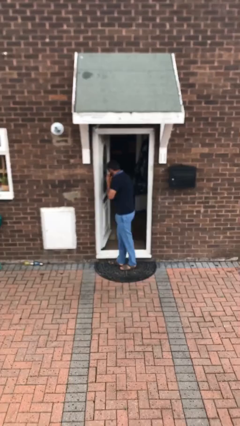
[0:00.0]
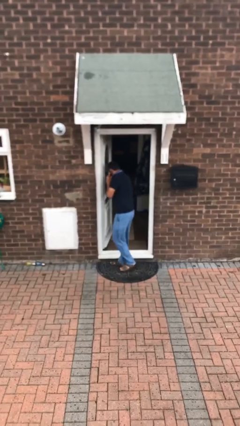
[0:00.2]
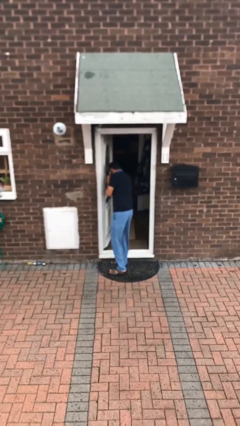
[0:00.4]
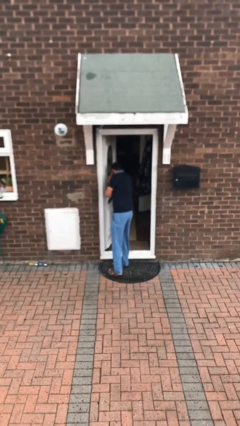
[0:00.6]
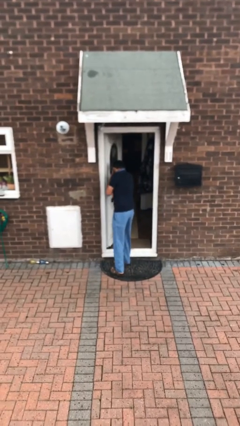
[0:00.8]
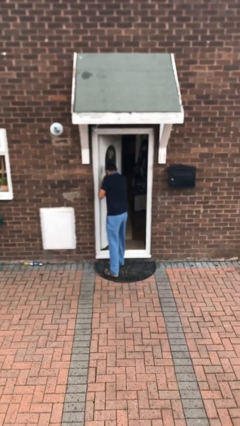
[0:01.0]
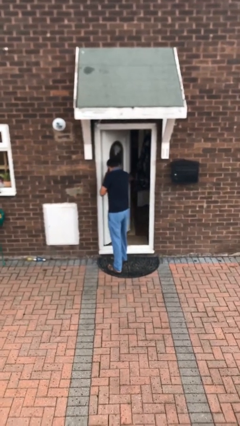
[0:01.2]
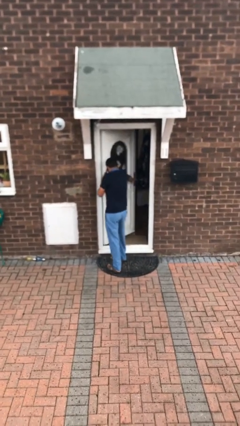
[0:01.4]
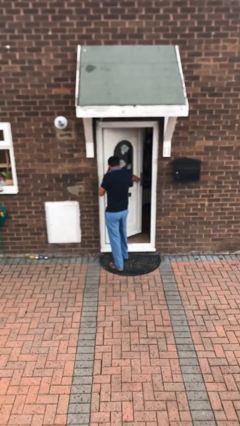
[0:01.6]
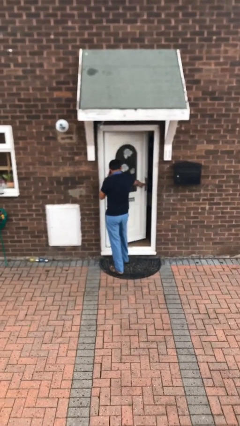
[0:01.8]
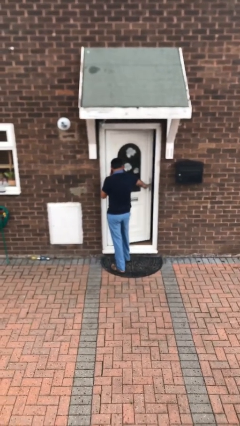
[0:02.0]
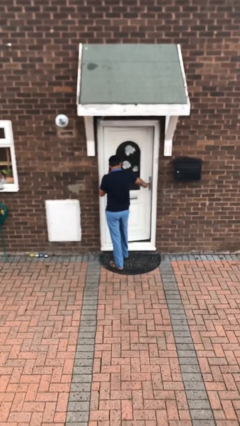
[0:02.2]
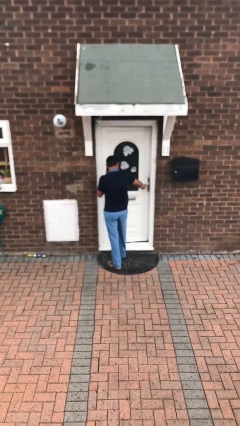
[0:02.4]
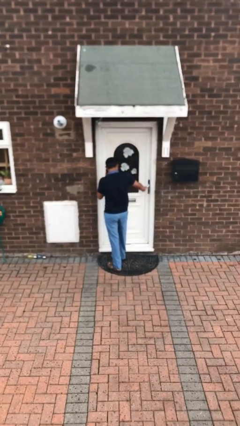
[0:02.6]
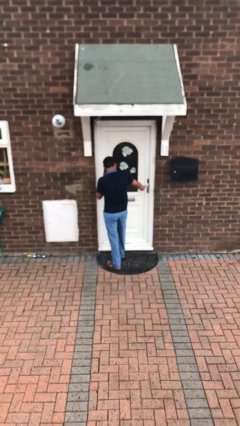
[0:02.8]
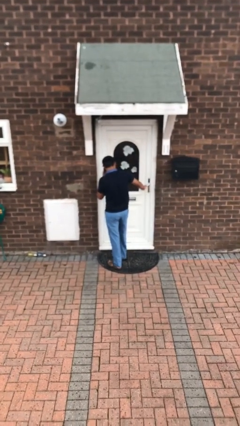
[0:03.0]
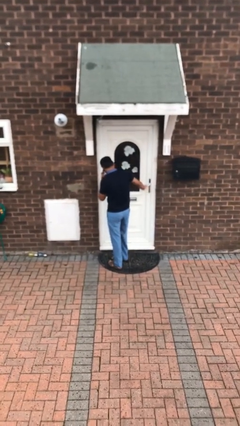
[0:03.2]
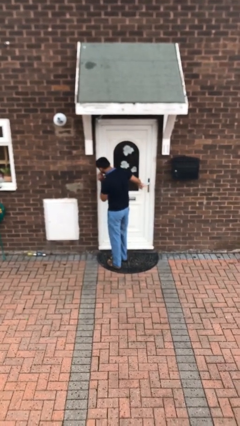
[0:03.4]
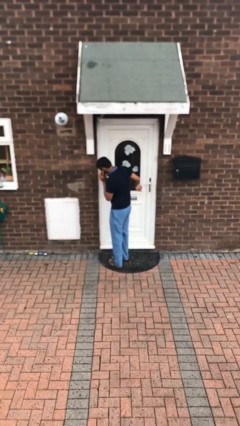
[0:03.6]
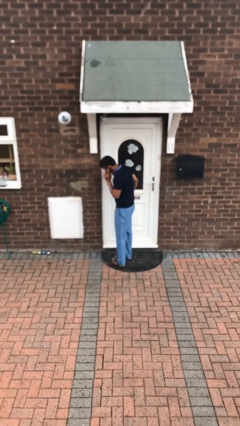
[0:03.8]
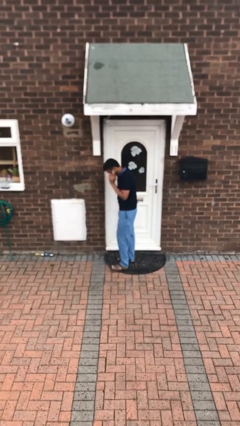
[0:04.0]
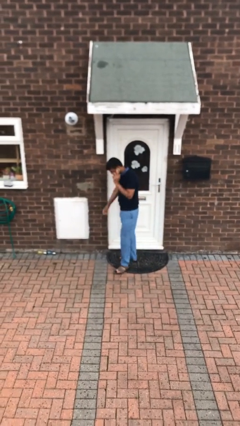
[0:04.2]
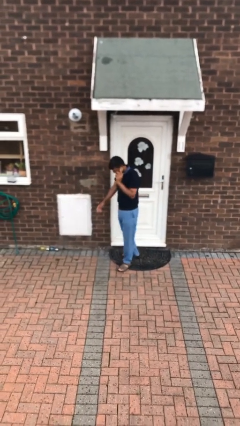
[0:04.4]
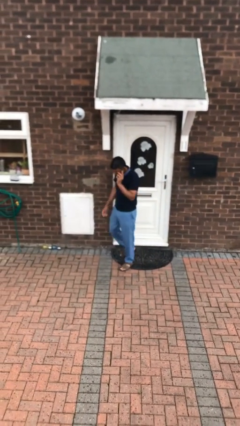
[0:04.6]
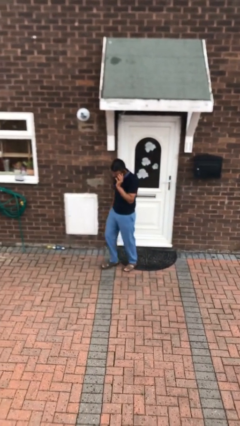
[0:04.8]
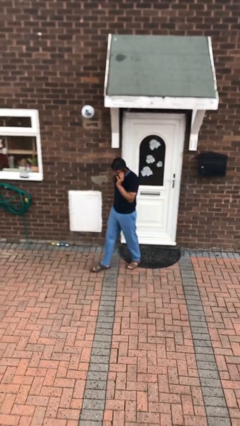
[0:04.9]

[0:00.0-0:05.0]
person closes facility door

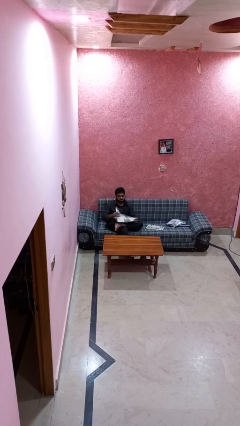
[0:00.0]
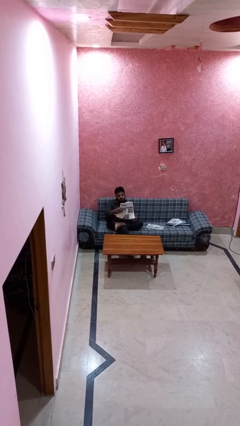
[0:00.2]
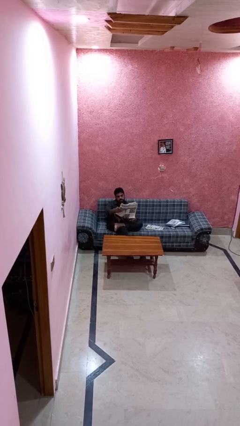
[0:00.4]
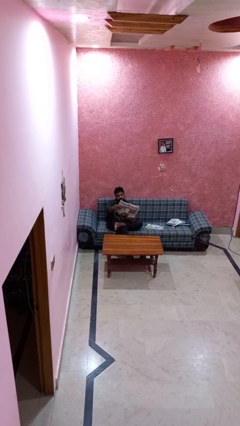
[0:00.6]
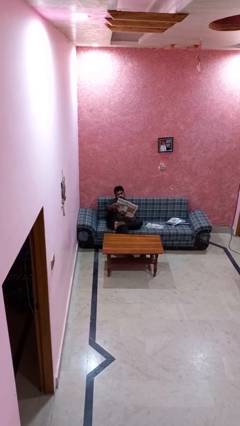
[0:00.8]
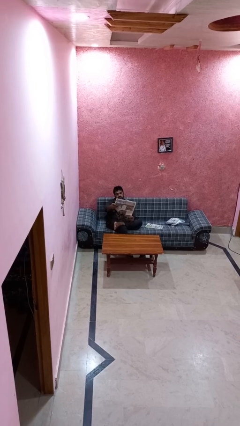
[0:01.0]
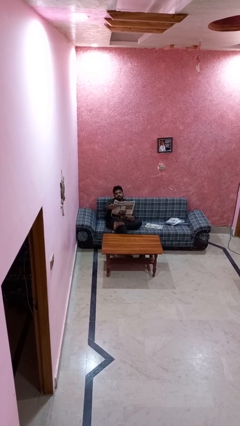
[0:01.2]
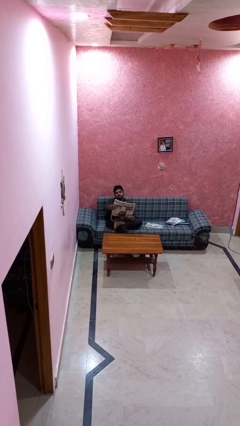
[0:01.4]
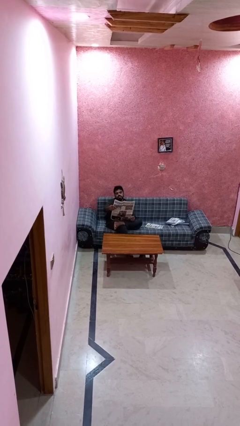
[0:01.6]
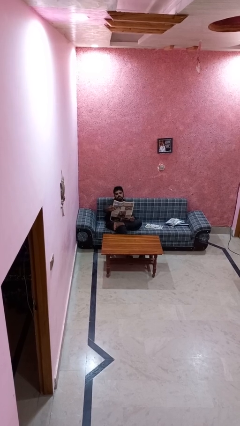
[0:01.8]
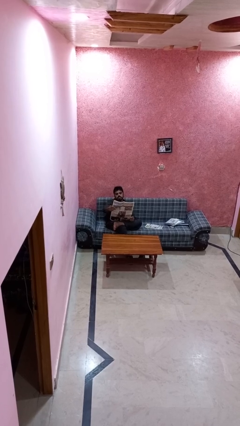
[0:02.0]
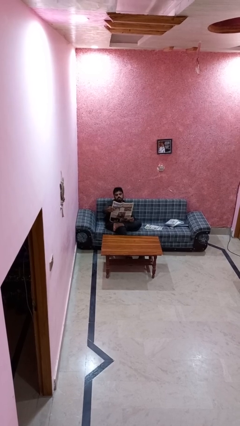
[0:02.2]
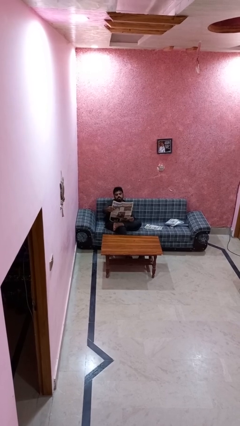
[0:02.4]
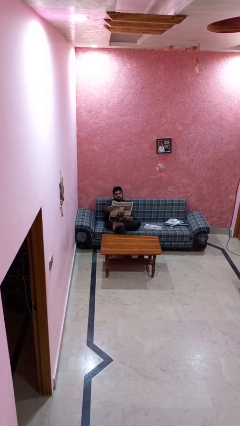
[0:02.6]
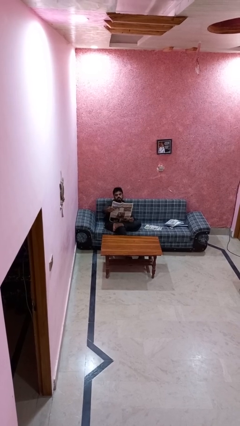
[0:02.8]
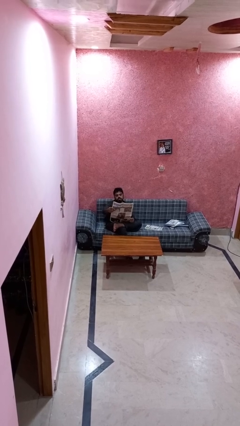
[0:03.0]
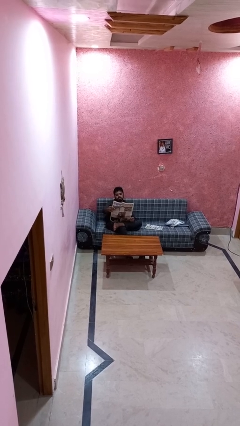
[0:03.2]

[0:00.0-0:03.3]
person reads newspaper

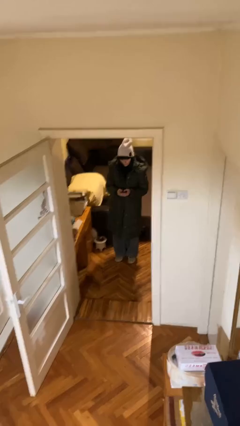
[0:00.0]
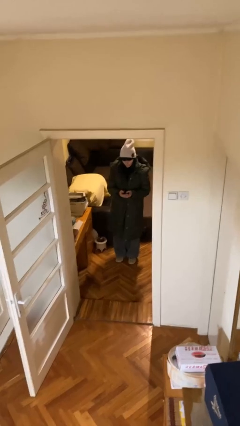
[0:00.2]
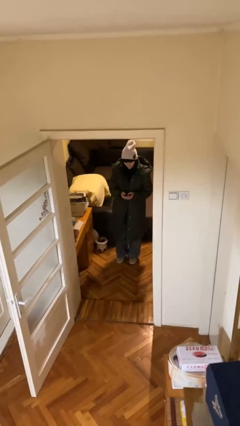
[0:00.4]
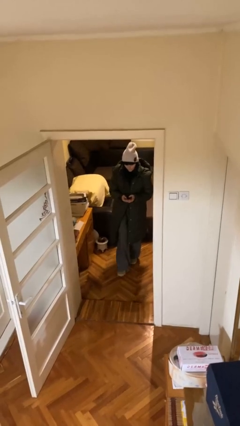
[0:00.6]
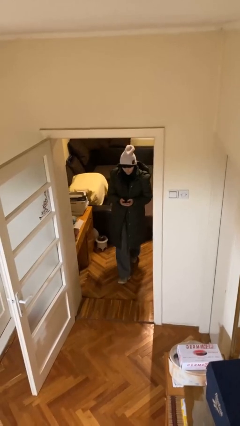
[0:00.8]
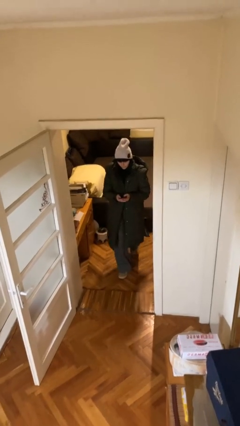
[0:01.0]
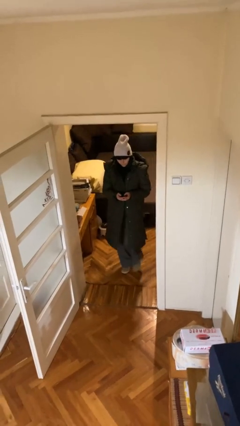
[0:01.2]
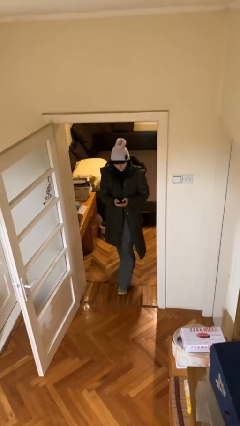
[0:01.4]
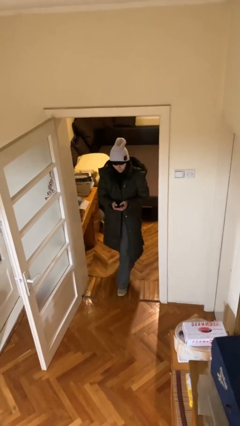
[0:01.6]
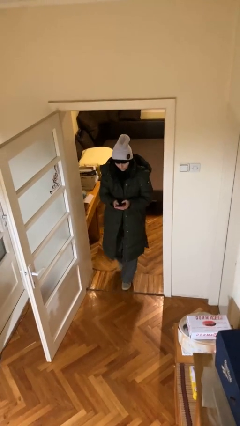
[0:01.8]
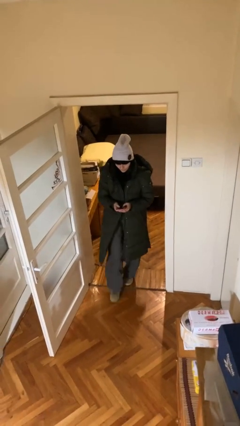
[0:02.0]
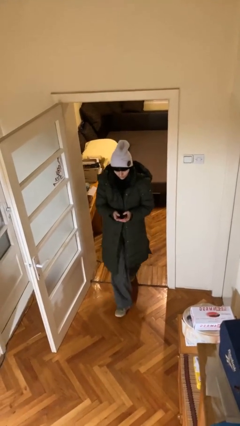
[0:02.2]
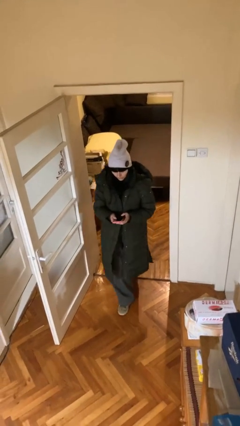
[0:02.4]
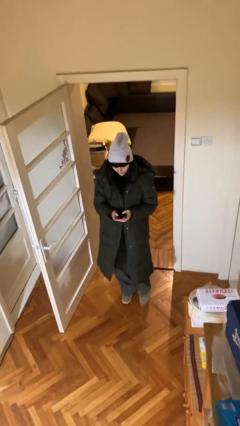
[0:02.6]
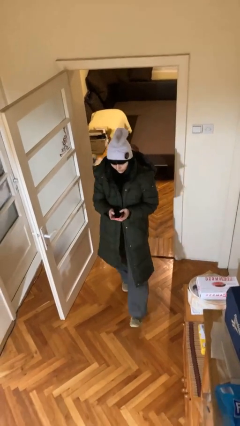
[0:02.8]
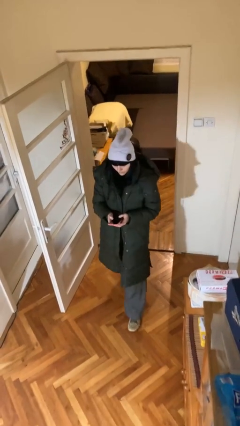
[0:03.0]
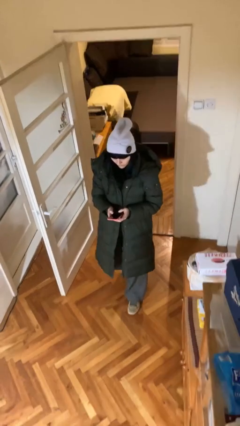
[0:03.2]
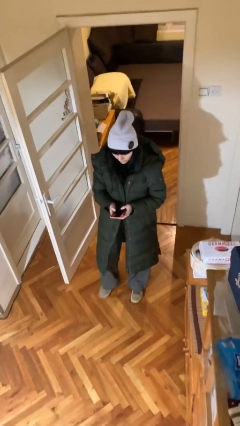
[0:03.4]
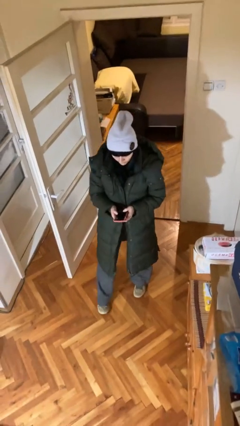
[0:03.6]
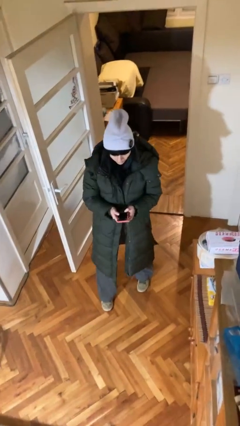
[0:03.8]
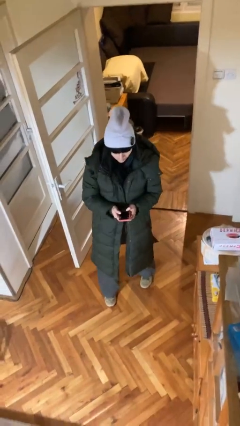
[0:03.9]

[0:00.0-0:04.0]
person enters scene through structure

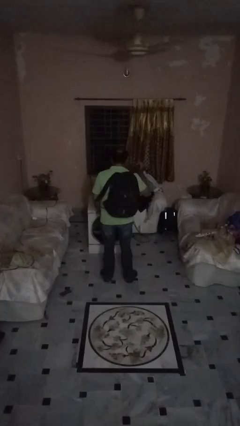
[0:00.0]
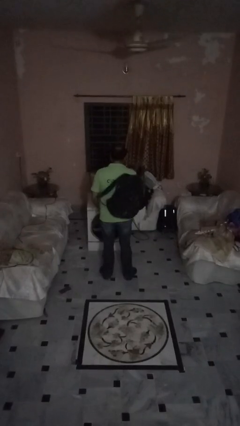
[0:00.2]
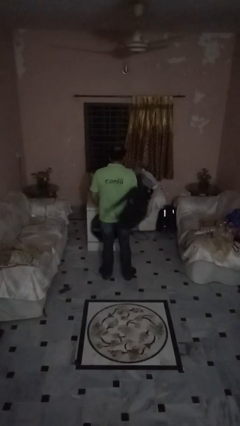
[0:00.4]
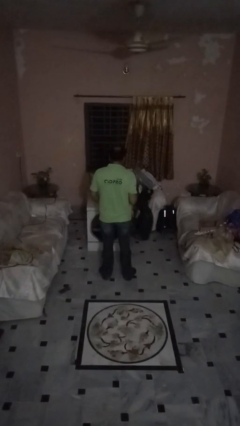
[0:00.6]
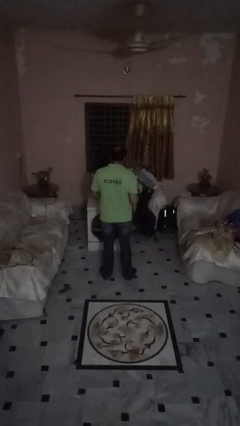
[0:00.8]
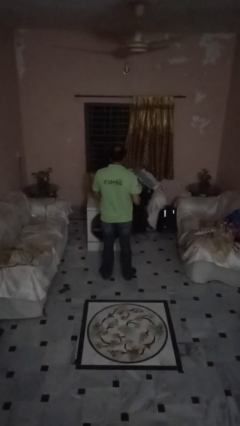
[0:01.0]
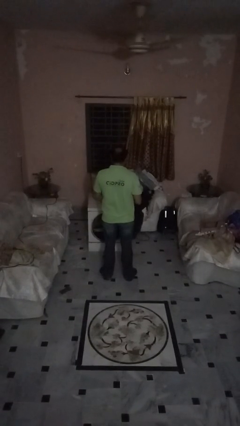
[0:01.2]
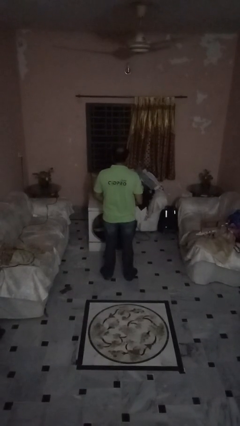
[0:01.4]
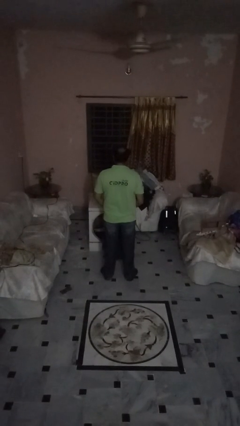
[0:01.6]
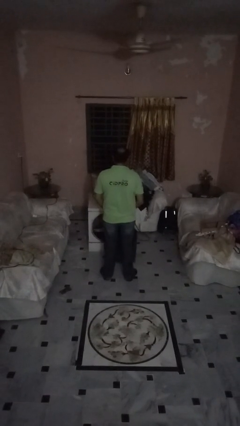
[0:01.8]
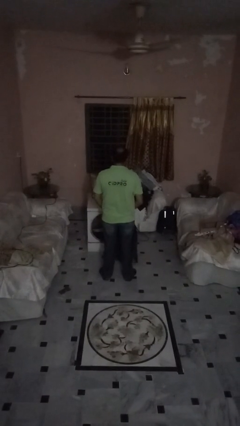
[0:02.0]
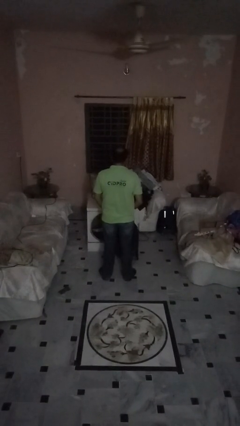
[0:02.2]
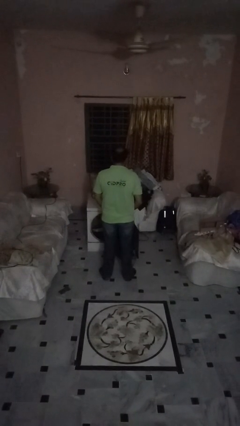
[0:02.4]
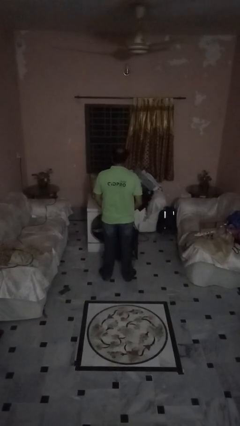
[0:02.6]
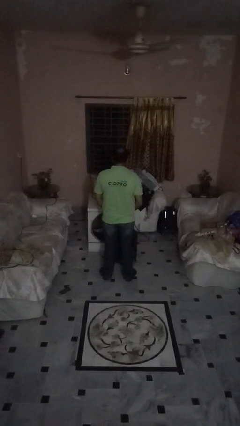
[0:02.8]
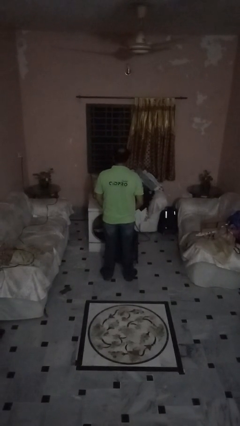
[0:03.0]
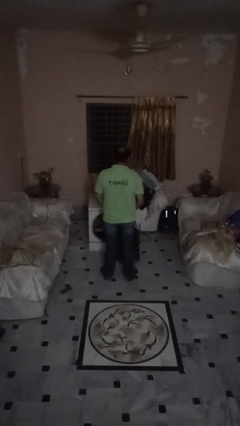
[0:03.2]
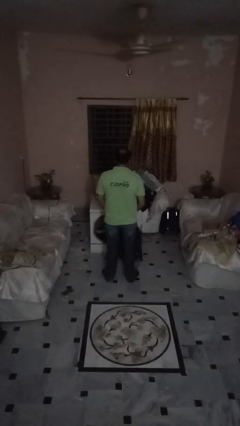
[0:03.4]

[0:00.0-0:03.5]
person takes off backpack

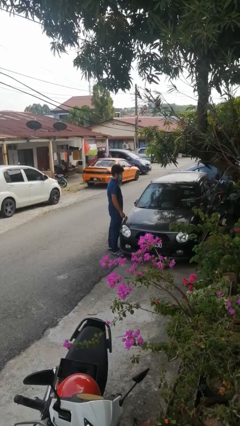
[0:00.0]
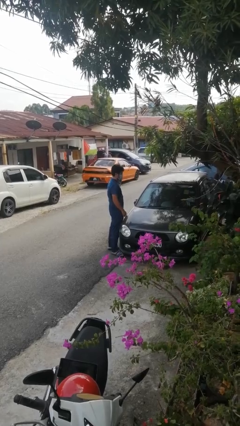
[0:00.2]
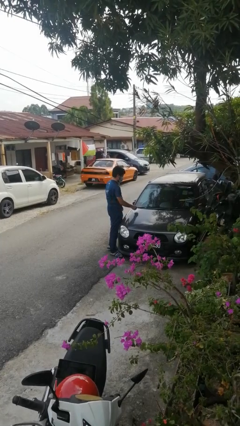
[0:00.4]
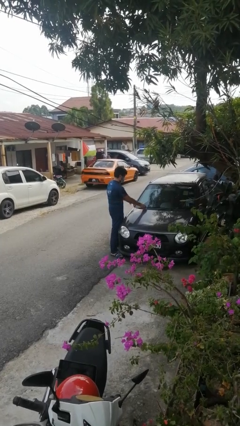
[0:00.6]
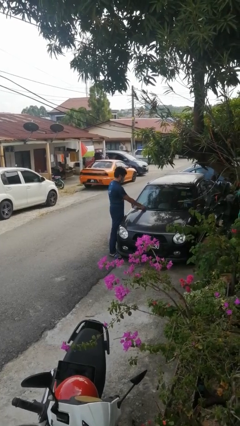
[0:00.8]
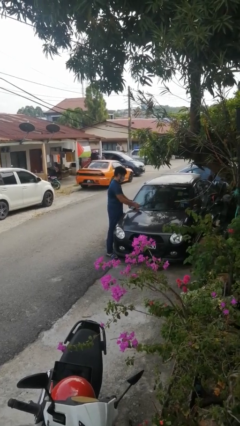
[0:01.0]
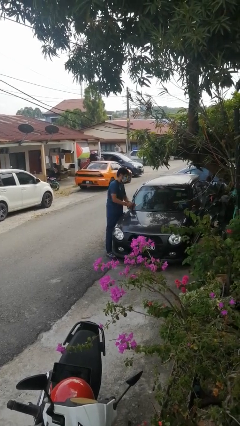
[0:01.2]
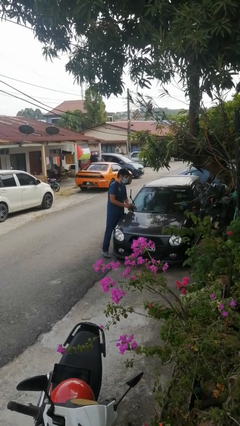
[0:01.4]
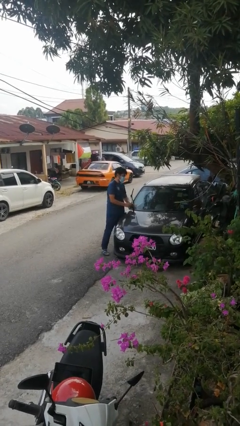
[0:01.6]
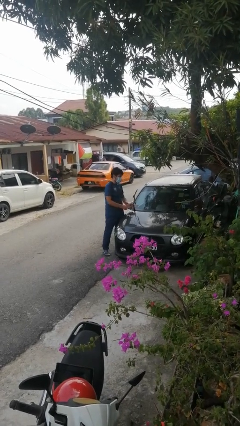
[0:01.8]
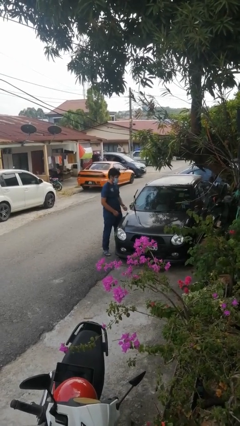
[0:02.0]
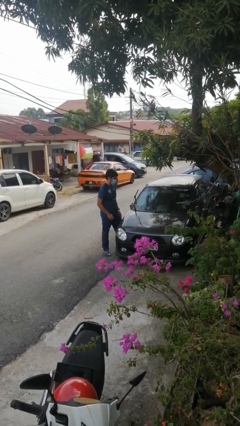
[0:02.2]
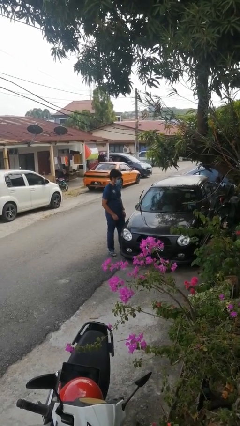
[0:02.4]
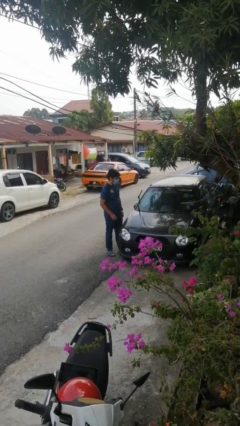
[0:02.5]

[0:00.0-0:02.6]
person flips up car wipers
